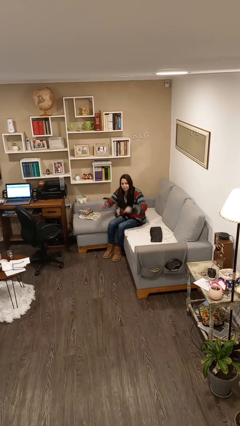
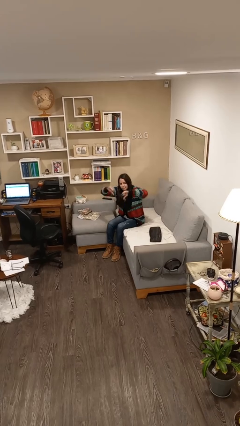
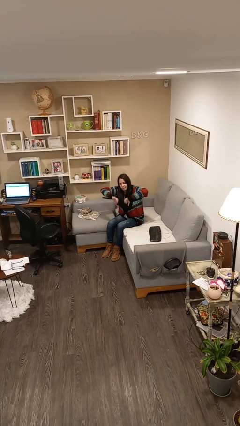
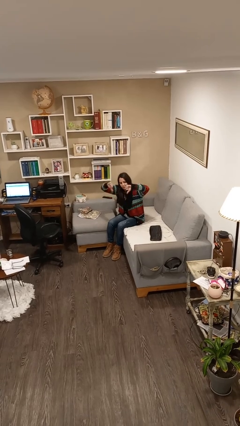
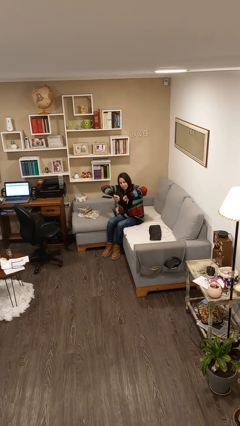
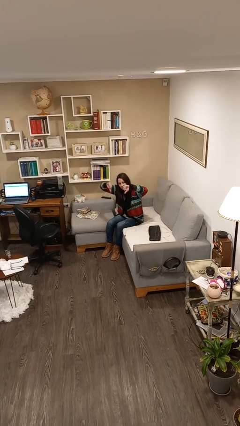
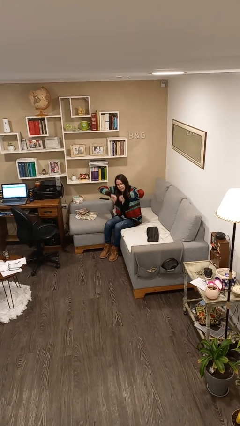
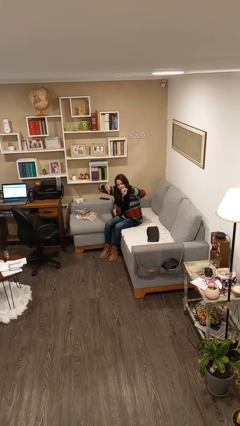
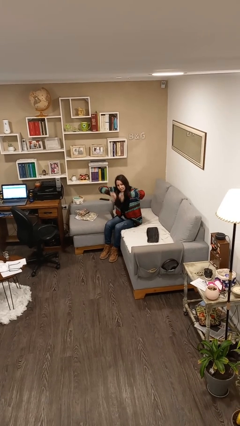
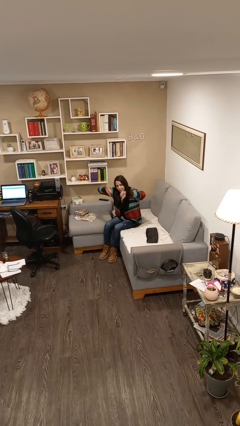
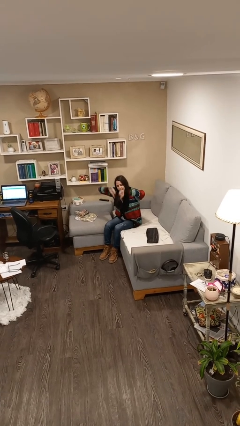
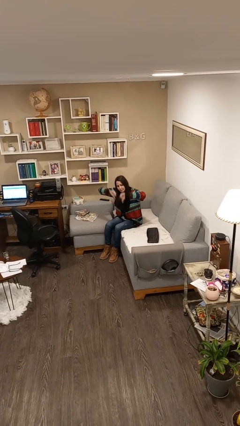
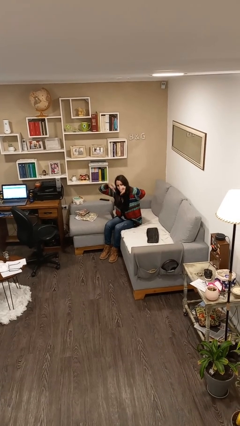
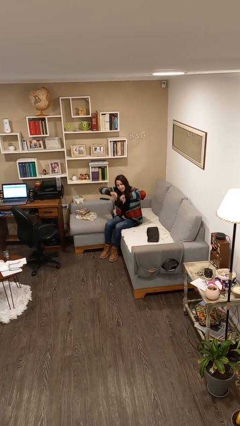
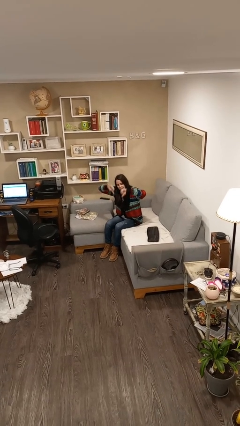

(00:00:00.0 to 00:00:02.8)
person gestures thumbs down

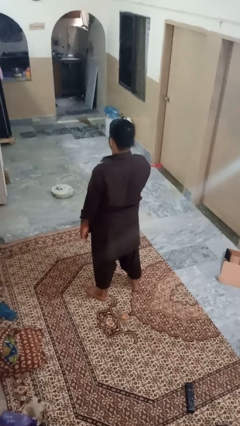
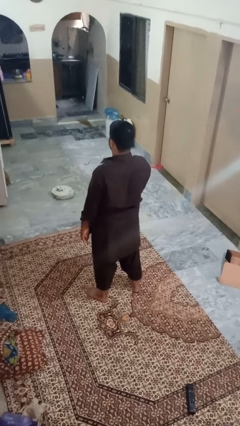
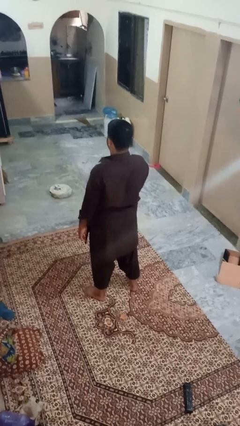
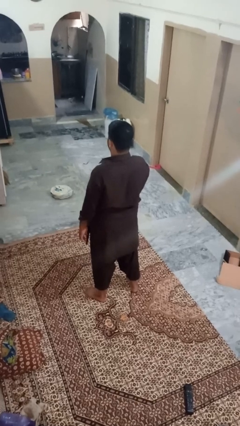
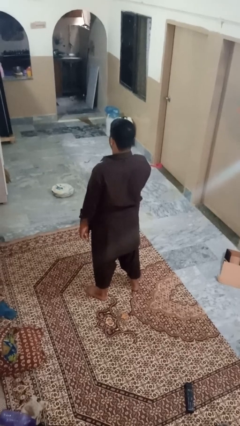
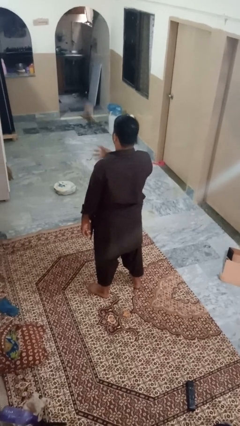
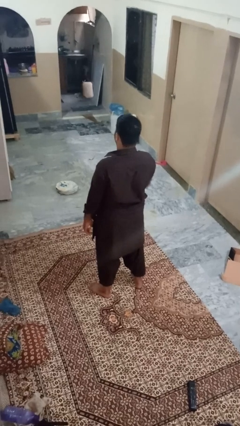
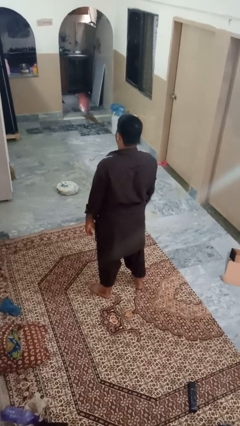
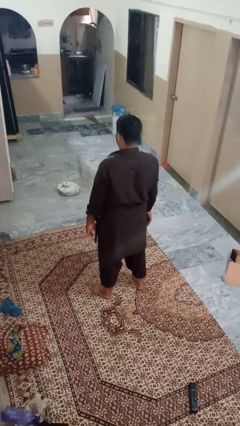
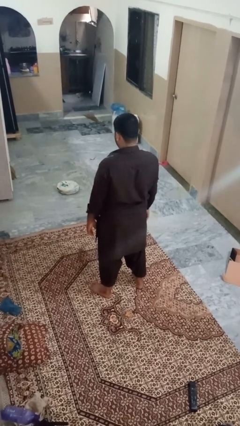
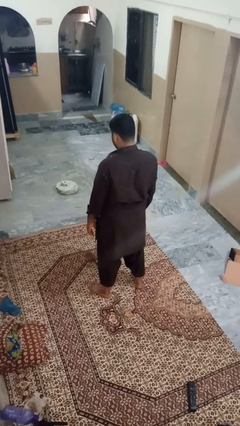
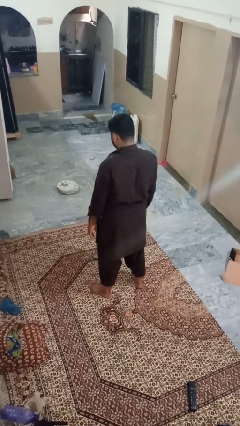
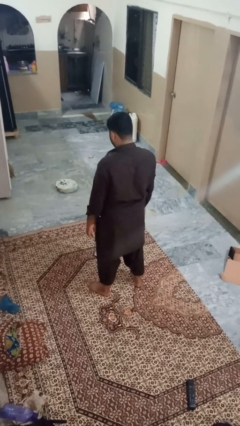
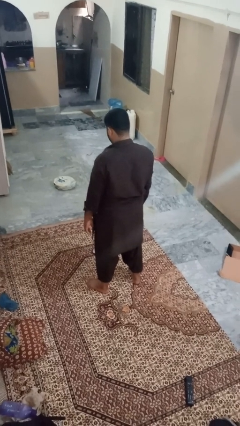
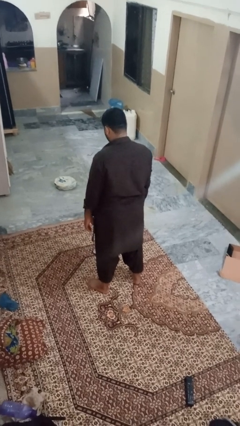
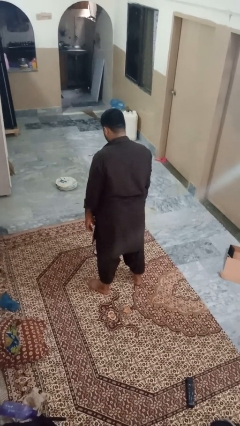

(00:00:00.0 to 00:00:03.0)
person throws object into air

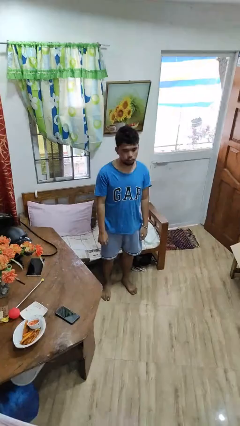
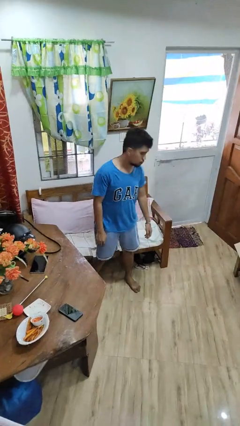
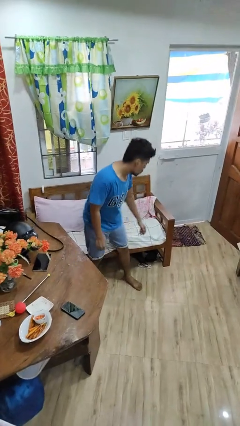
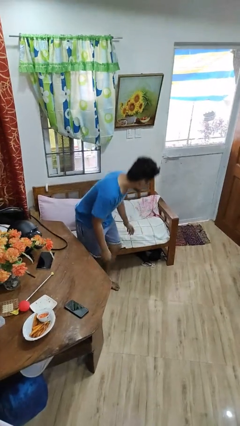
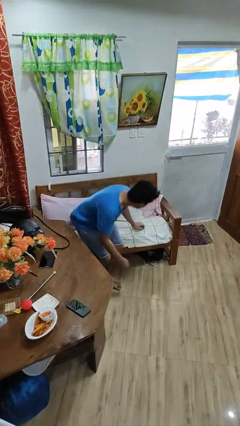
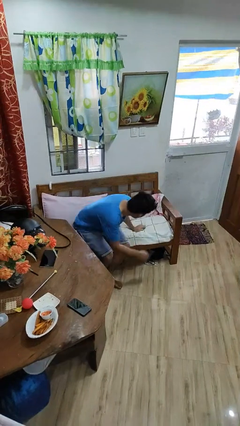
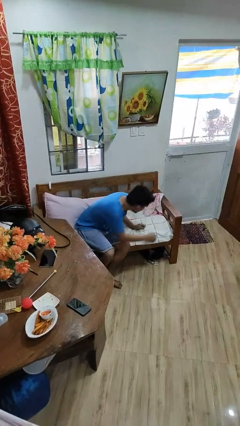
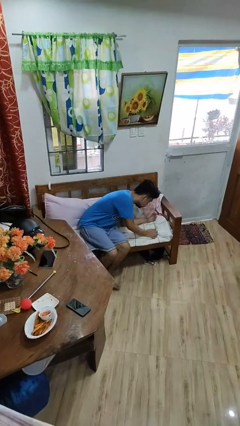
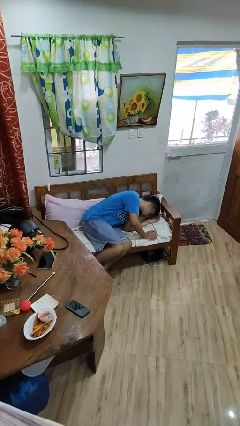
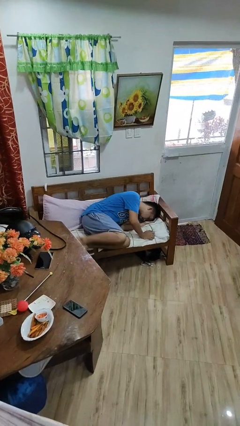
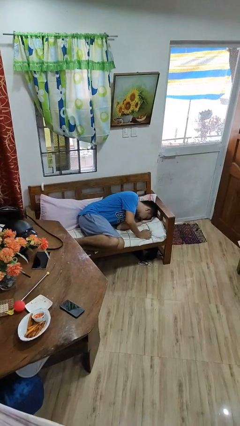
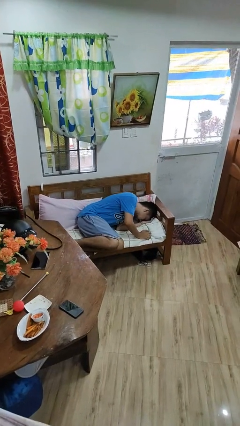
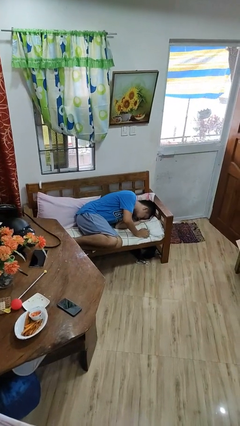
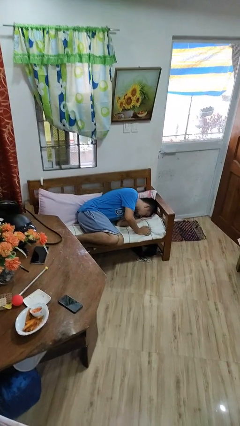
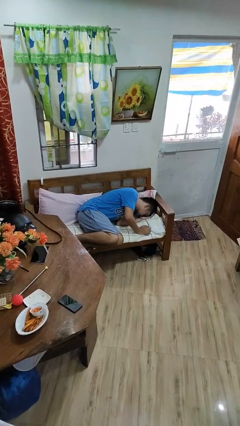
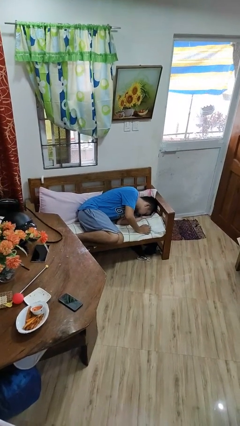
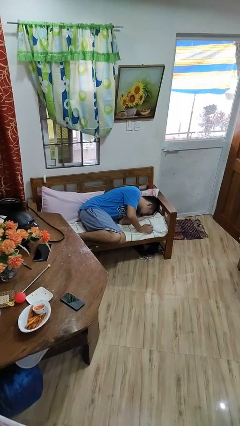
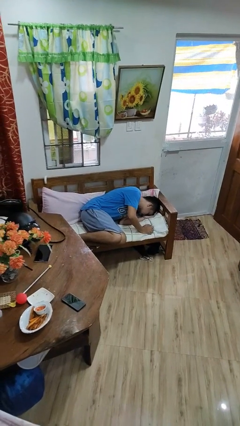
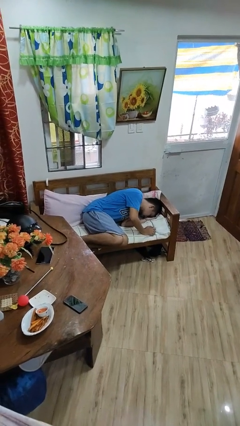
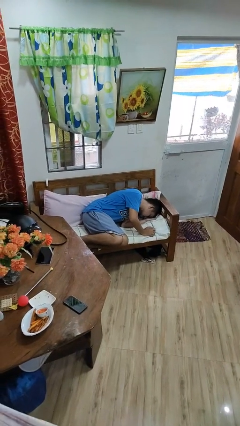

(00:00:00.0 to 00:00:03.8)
person lies down on couch

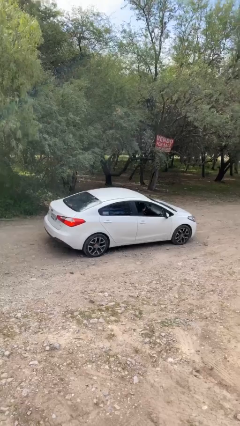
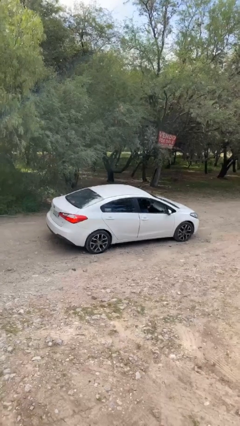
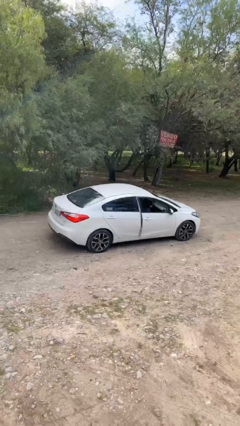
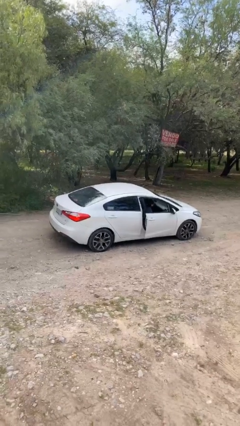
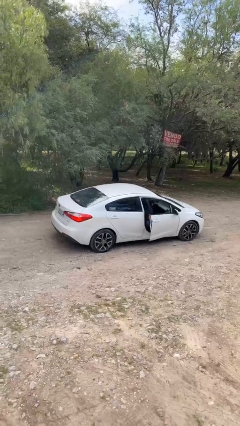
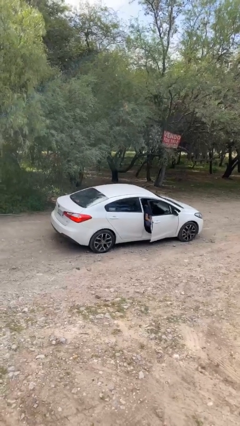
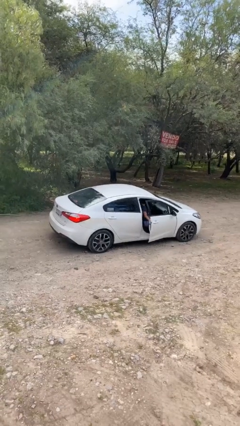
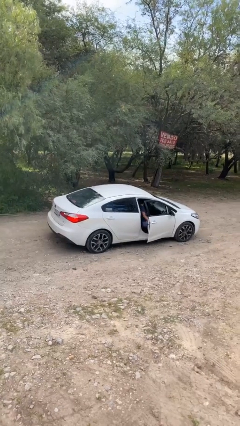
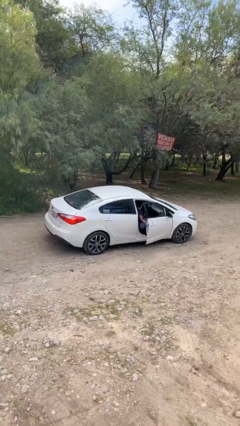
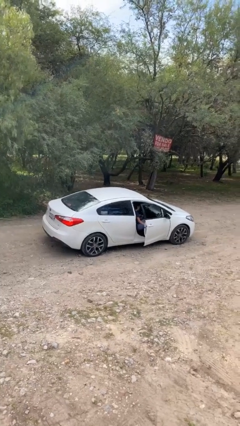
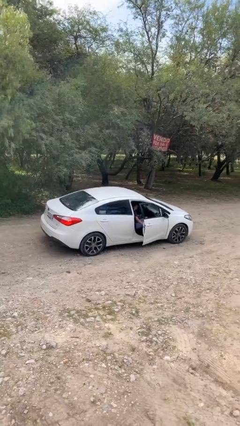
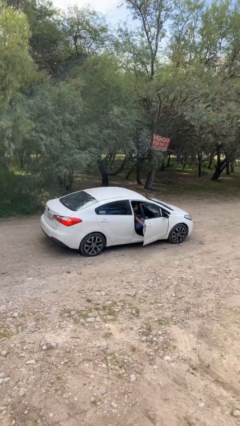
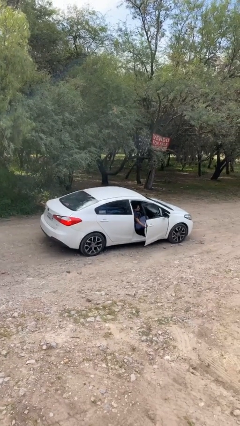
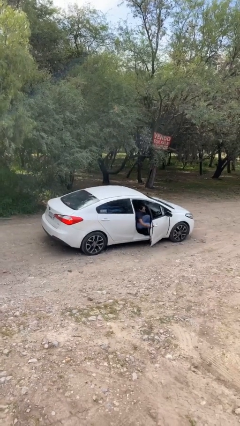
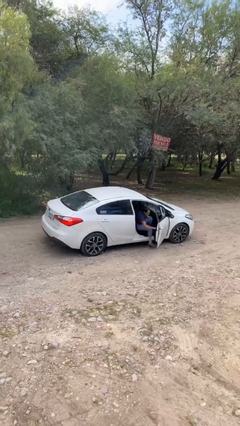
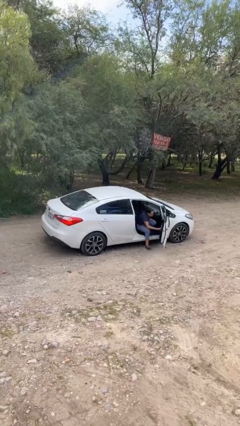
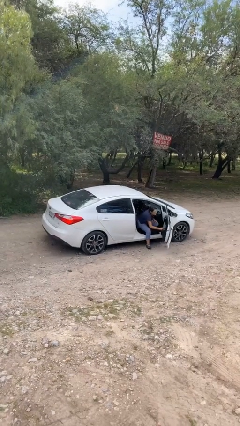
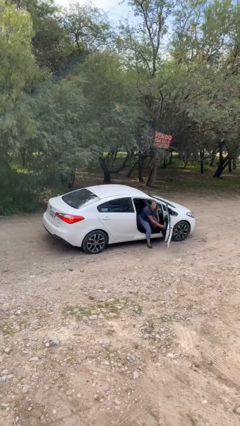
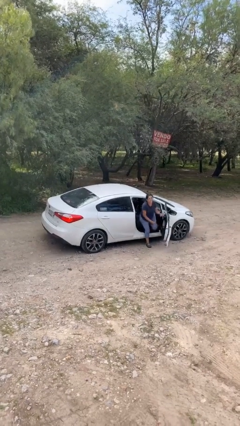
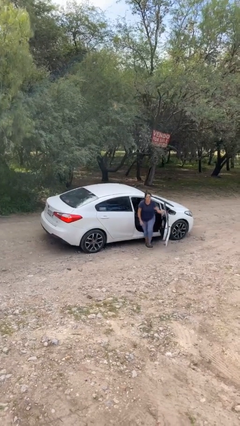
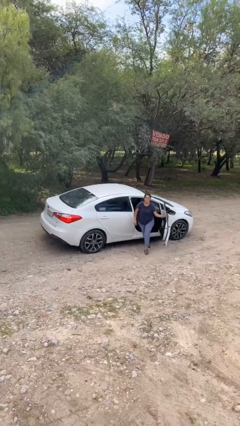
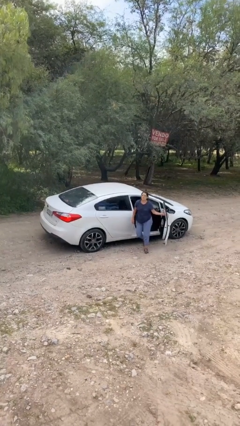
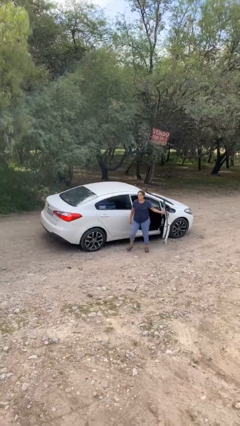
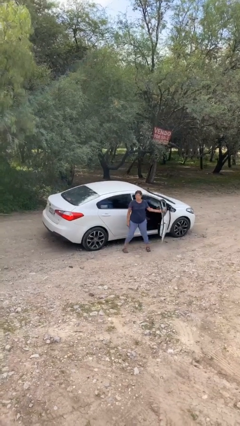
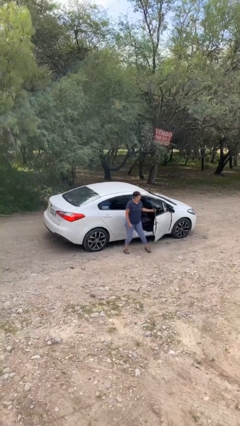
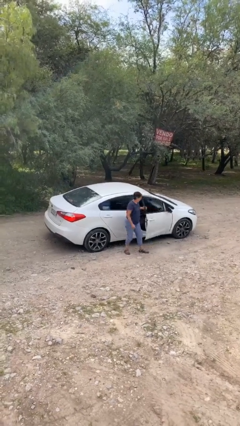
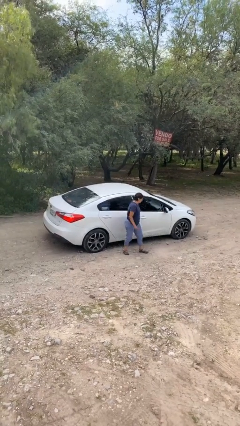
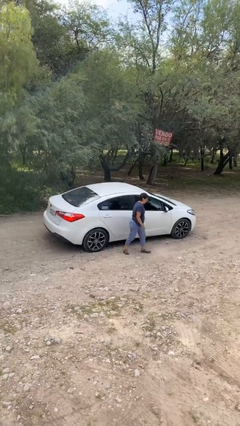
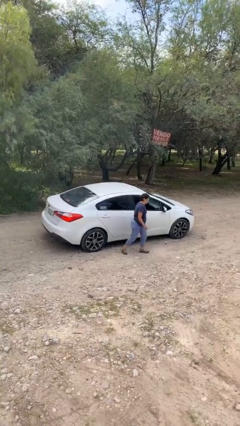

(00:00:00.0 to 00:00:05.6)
car drops off person

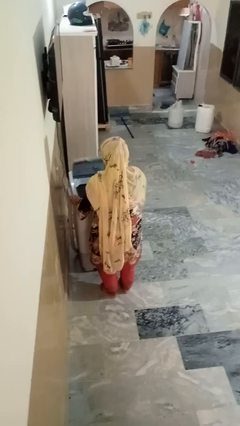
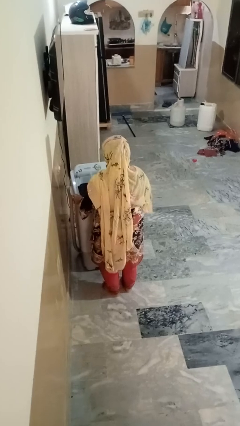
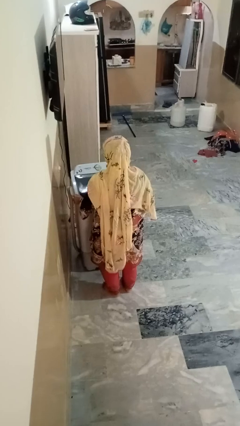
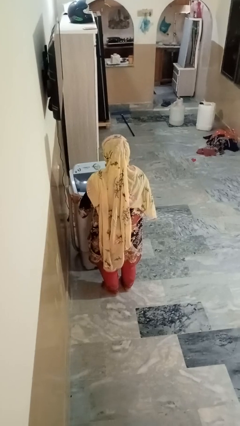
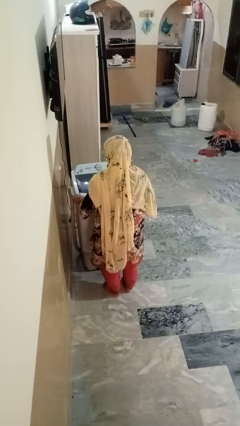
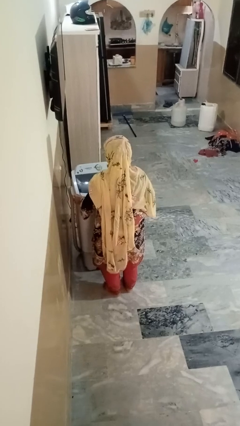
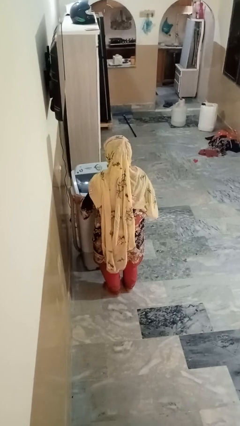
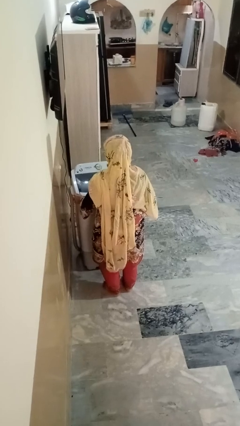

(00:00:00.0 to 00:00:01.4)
person closes clothes washer

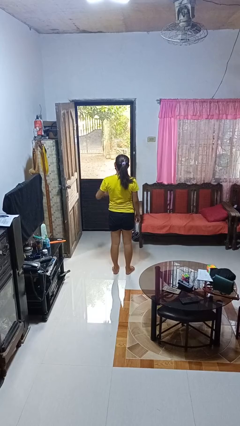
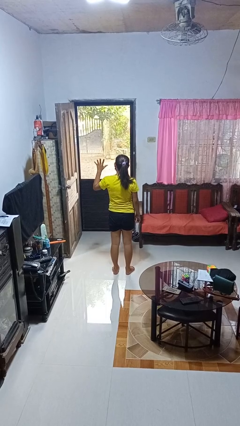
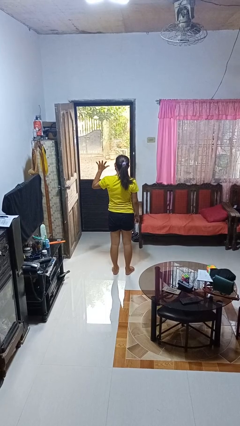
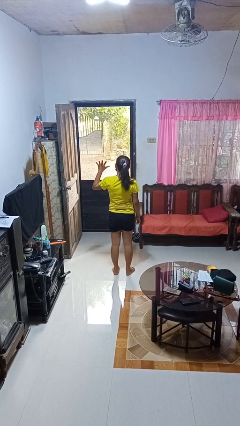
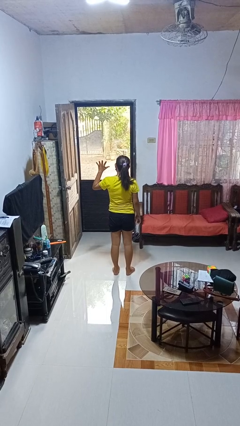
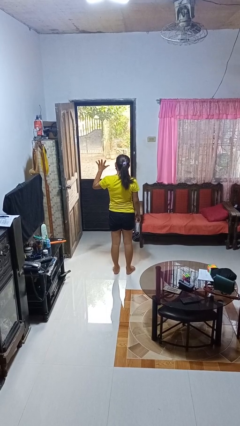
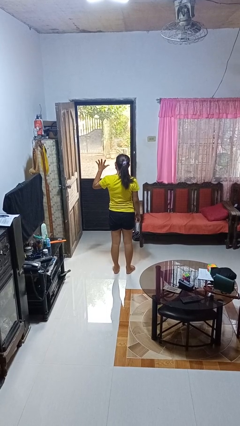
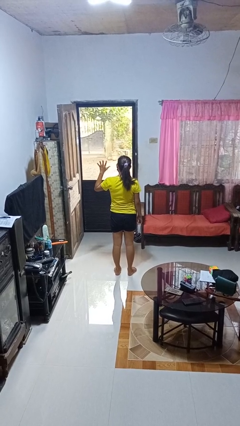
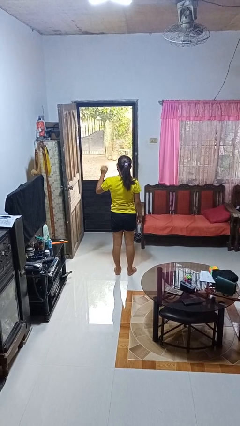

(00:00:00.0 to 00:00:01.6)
person gestures number five
